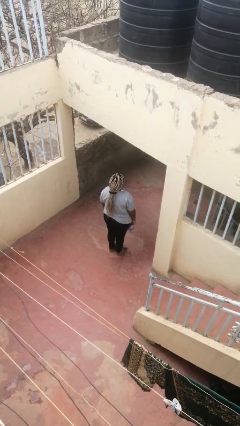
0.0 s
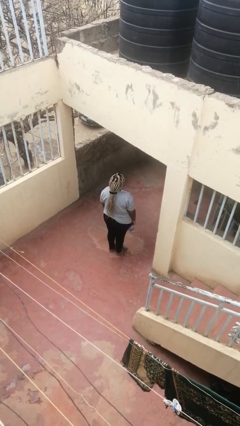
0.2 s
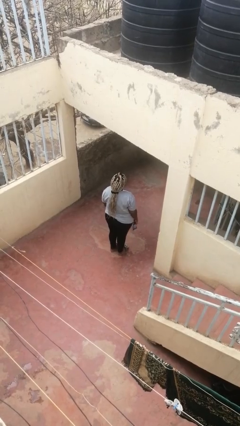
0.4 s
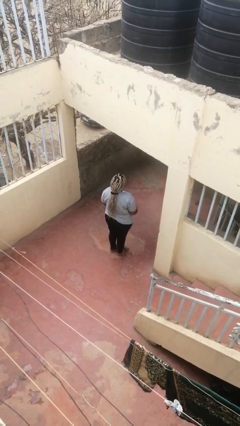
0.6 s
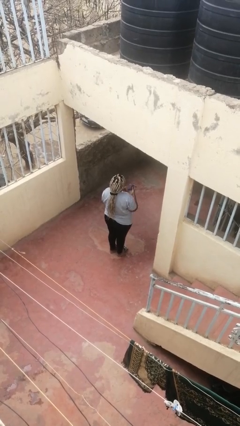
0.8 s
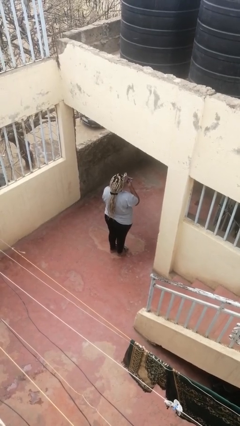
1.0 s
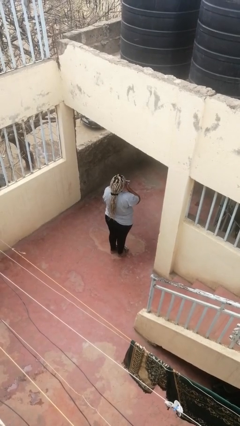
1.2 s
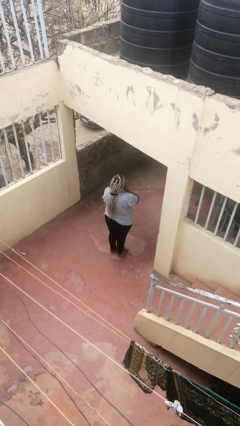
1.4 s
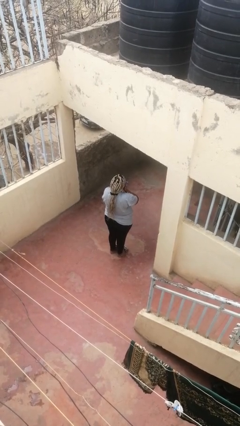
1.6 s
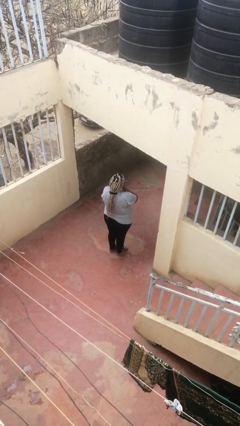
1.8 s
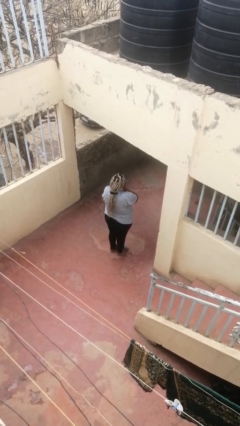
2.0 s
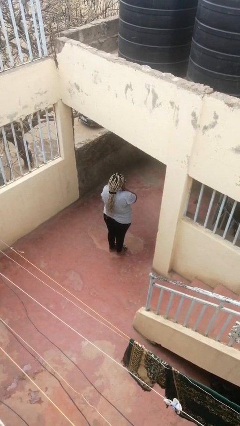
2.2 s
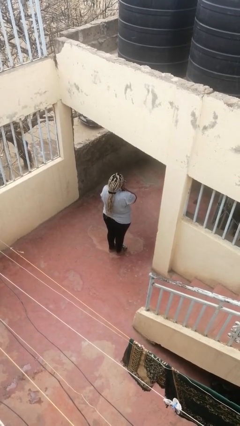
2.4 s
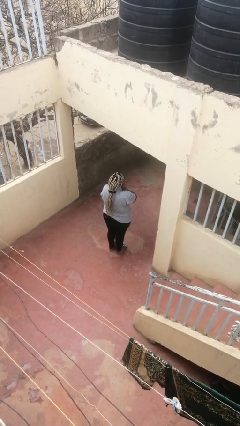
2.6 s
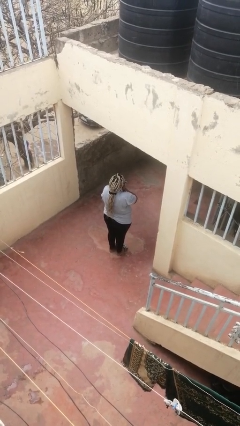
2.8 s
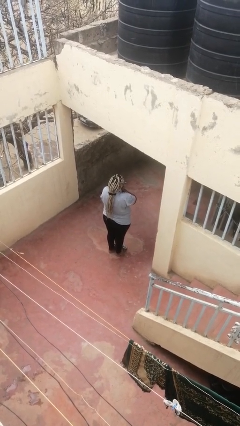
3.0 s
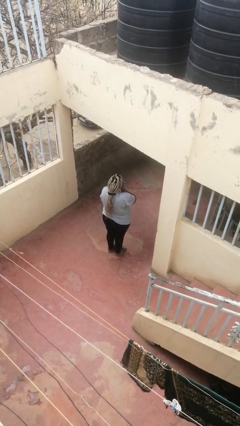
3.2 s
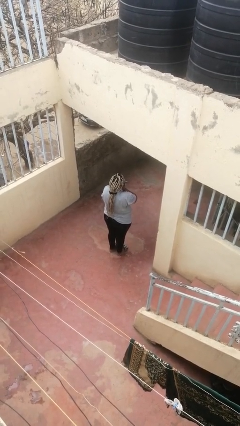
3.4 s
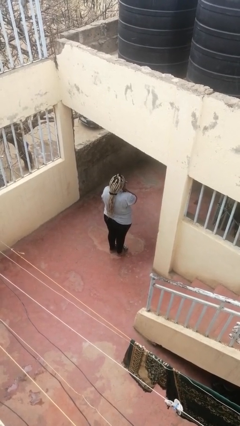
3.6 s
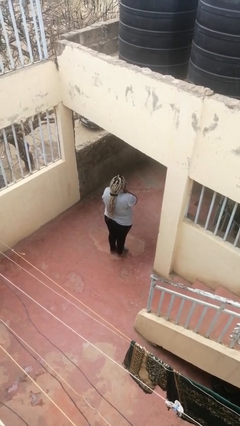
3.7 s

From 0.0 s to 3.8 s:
person blows nose

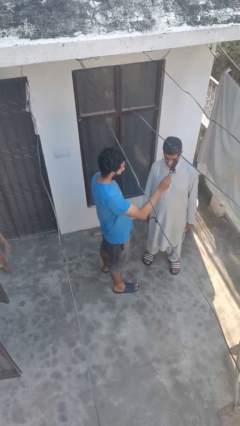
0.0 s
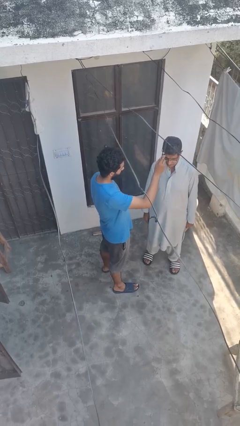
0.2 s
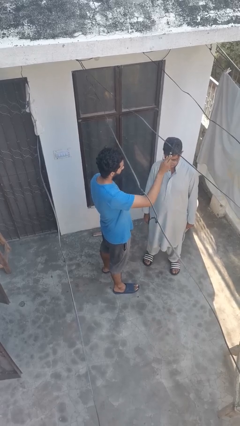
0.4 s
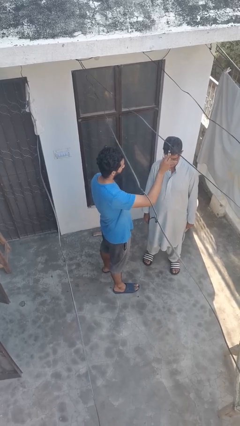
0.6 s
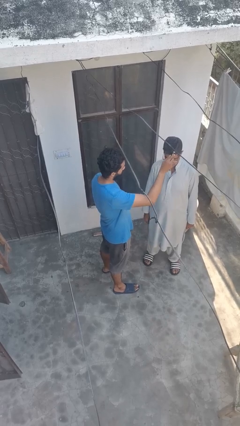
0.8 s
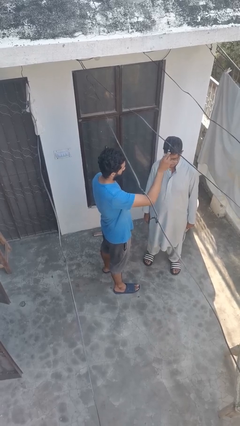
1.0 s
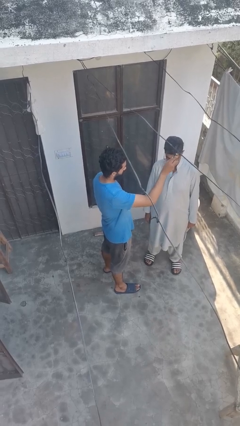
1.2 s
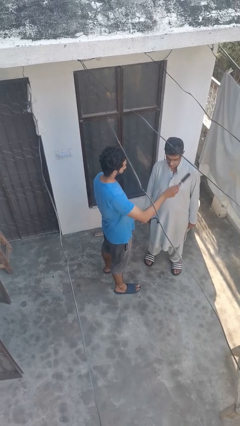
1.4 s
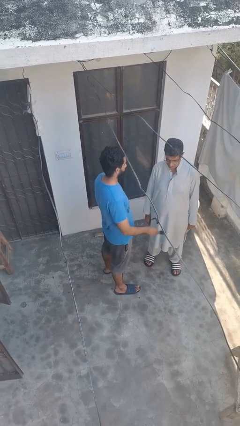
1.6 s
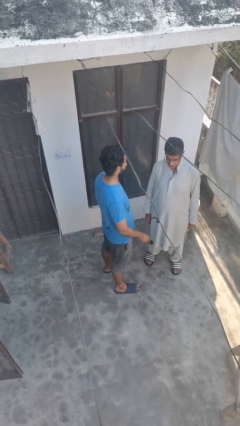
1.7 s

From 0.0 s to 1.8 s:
person brushes hair of person

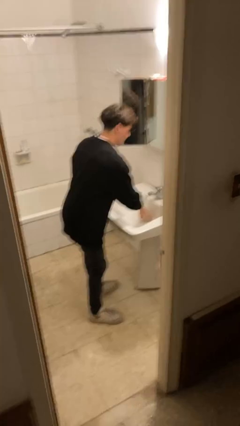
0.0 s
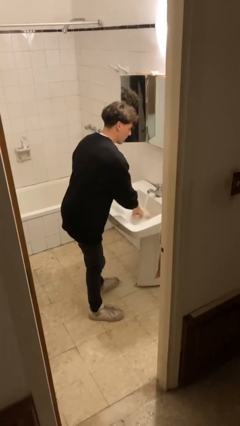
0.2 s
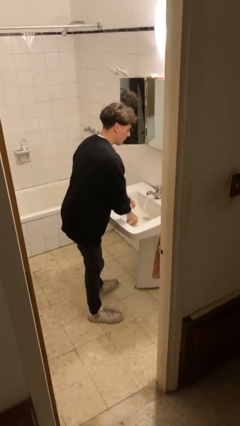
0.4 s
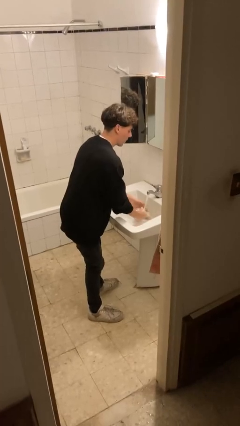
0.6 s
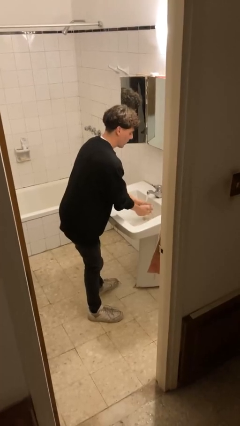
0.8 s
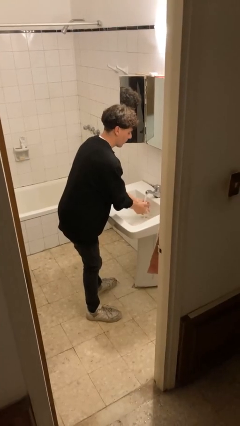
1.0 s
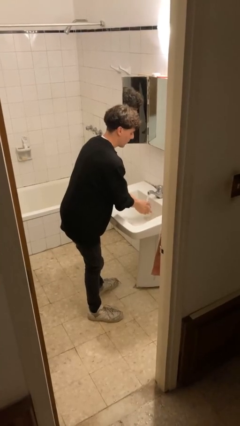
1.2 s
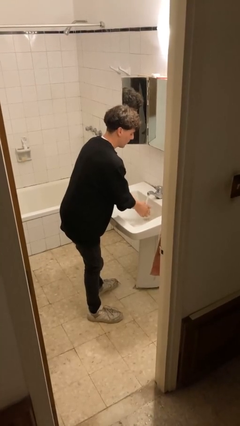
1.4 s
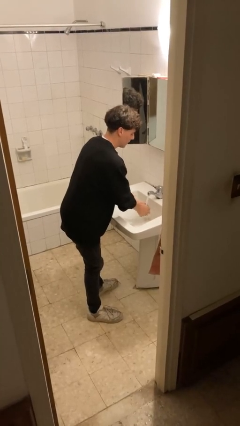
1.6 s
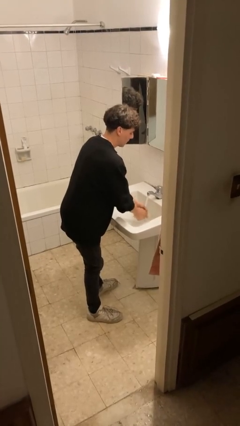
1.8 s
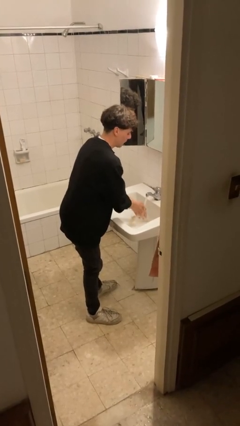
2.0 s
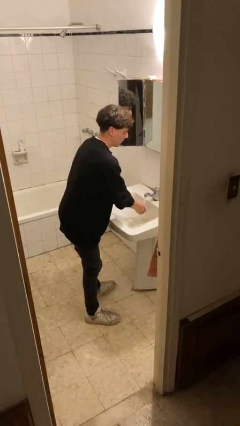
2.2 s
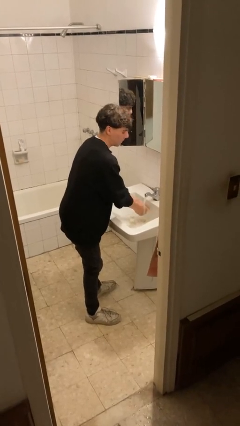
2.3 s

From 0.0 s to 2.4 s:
person washes hands

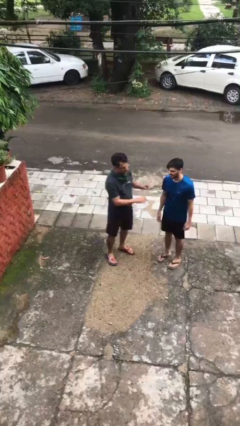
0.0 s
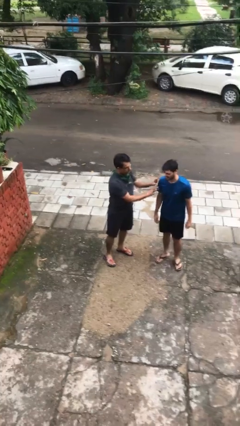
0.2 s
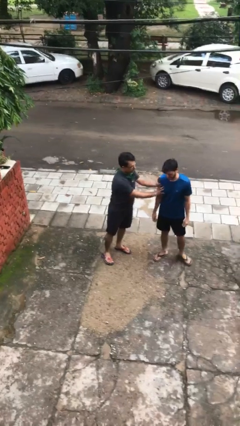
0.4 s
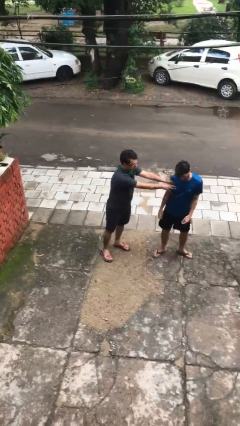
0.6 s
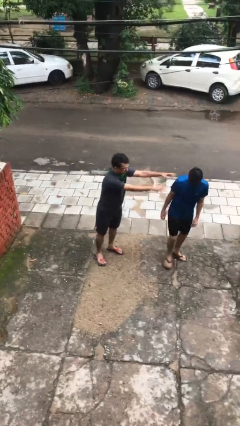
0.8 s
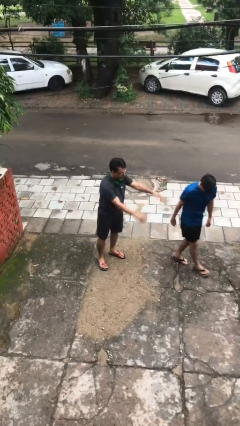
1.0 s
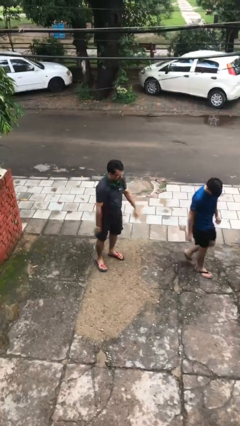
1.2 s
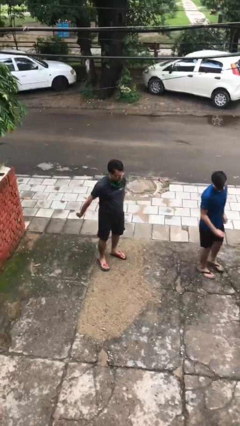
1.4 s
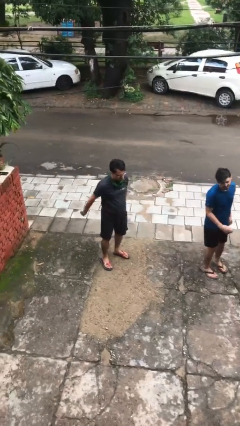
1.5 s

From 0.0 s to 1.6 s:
person shoves person

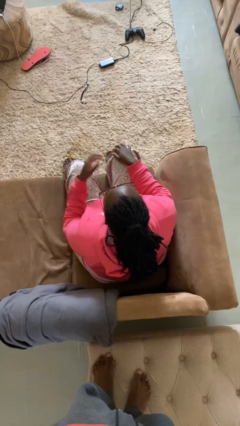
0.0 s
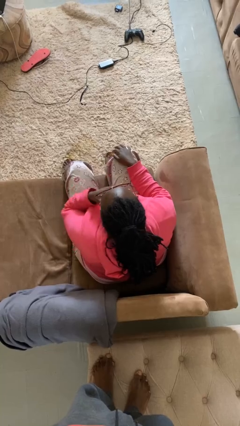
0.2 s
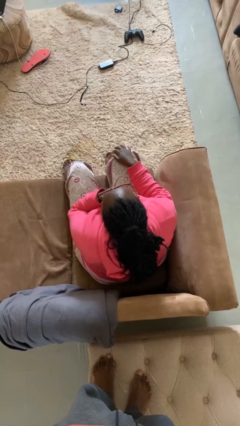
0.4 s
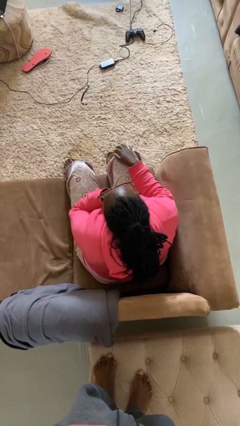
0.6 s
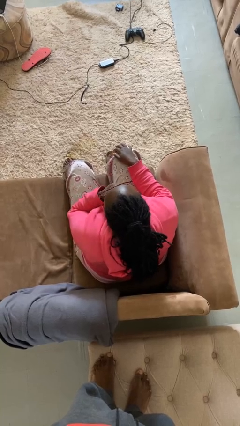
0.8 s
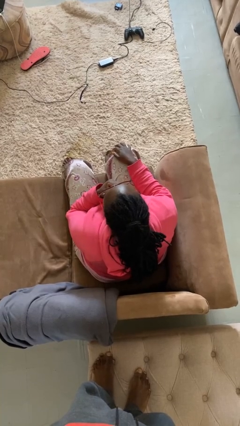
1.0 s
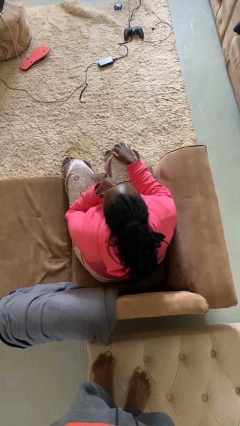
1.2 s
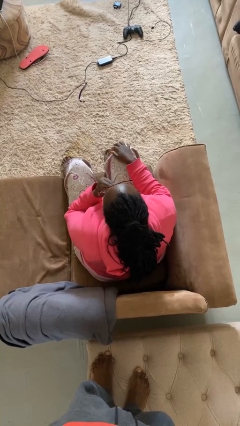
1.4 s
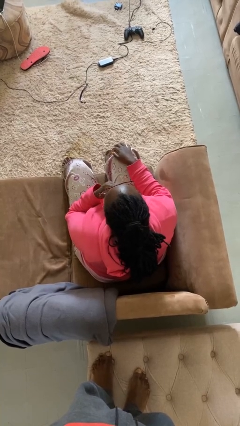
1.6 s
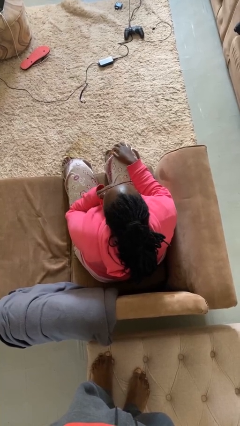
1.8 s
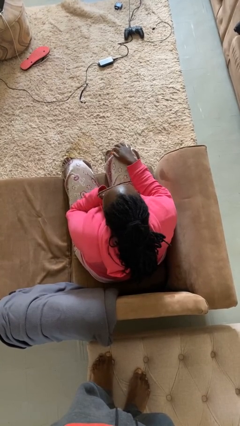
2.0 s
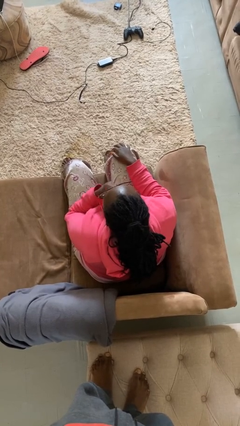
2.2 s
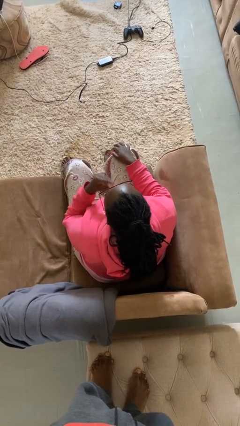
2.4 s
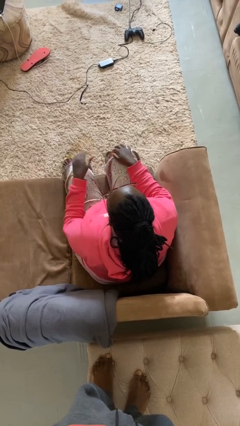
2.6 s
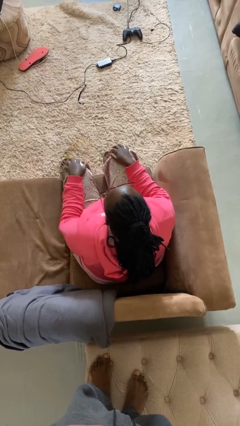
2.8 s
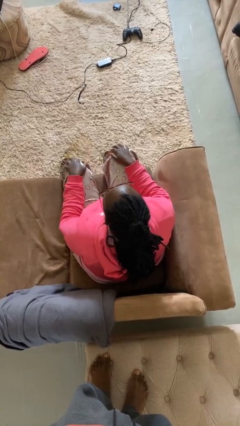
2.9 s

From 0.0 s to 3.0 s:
person strokes chin

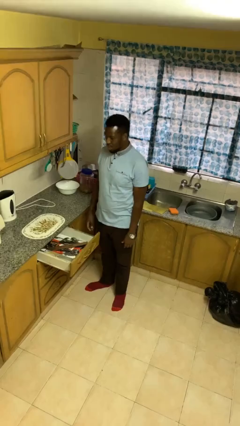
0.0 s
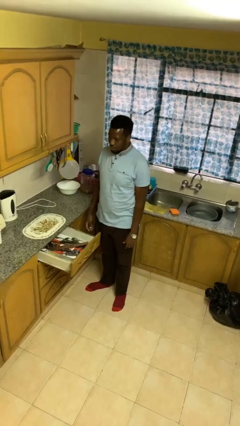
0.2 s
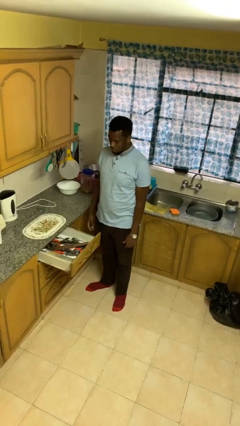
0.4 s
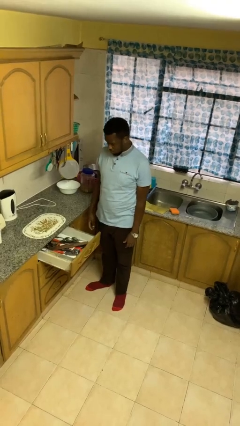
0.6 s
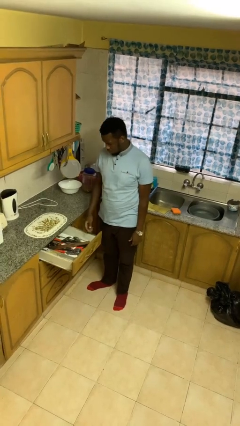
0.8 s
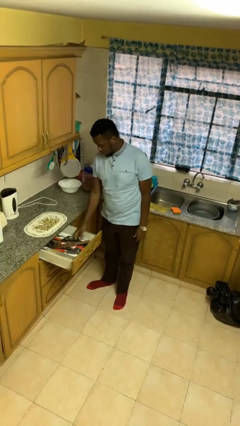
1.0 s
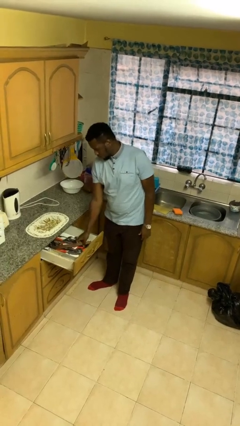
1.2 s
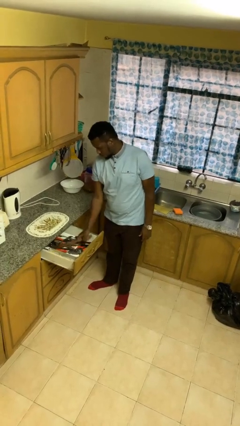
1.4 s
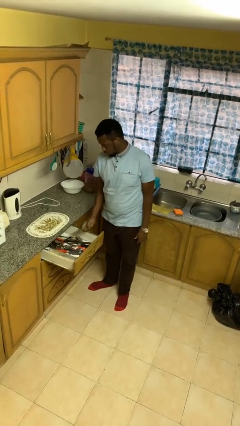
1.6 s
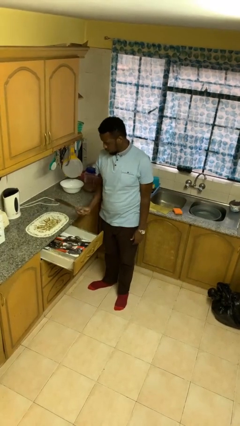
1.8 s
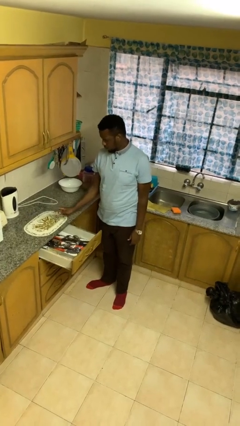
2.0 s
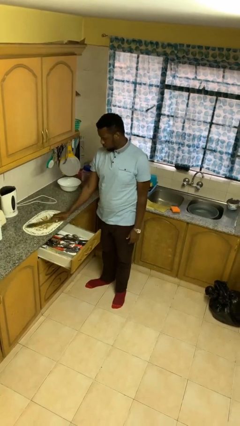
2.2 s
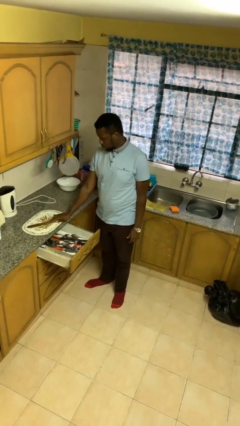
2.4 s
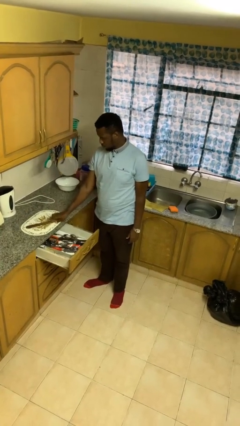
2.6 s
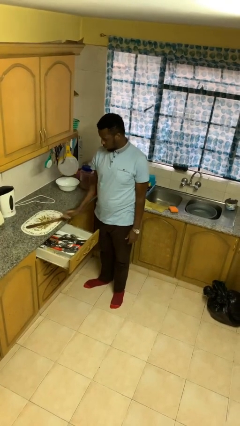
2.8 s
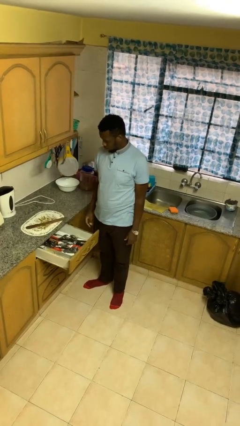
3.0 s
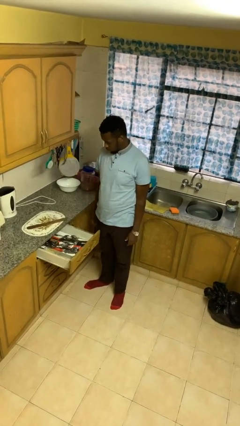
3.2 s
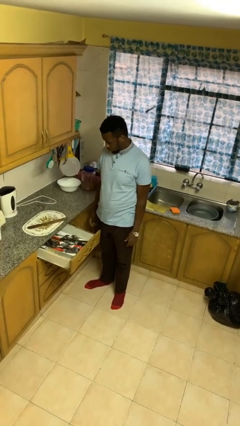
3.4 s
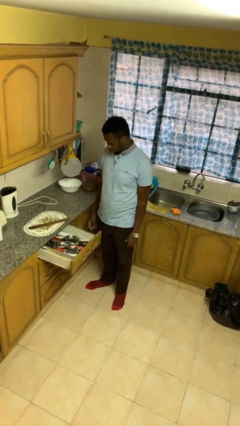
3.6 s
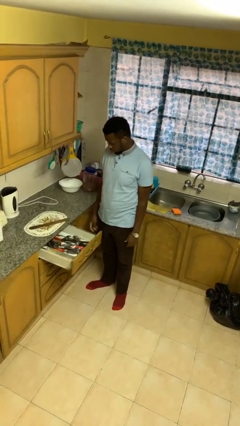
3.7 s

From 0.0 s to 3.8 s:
person takes object from kitchen drawer

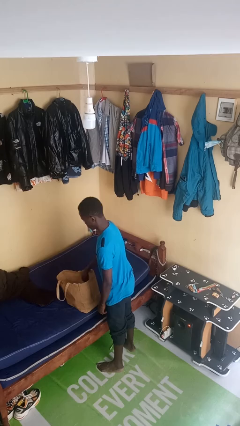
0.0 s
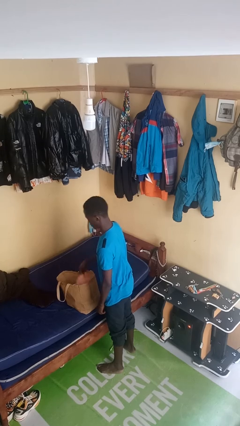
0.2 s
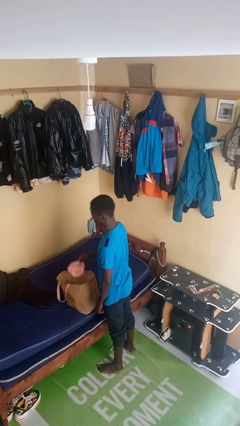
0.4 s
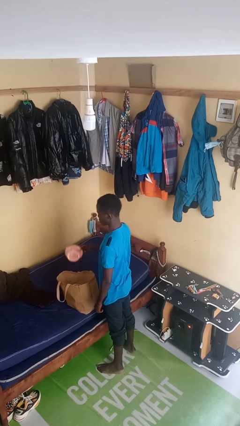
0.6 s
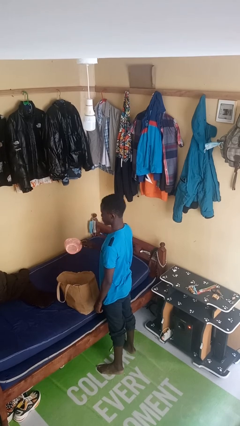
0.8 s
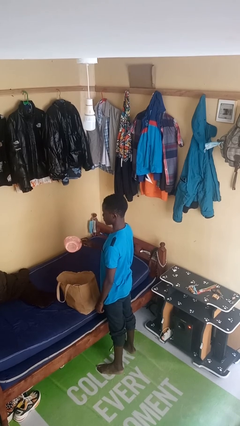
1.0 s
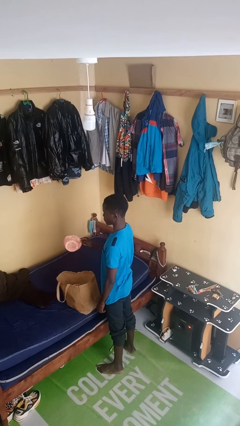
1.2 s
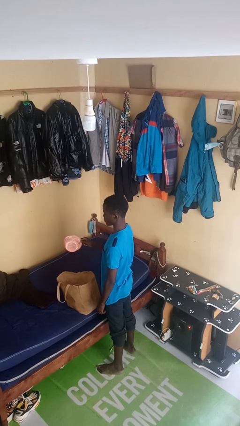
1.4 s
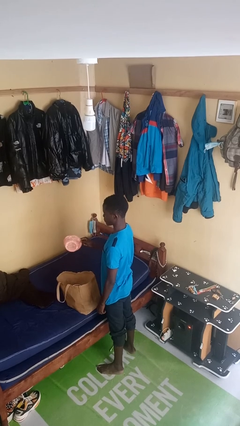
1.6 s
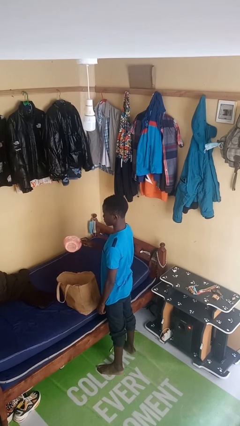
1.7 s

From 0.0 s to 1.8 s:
person takes object from bag
